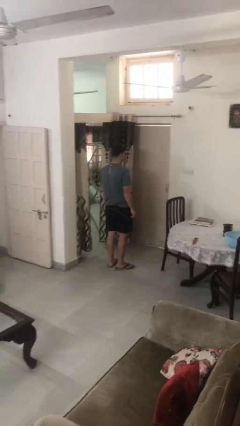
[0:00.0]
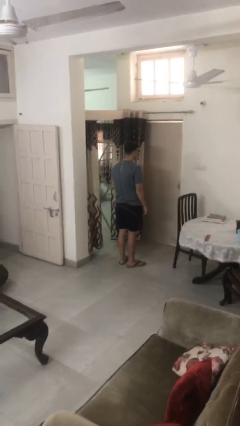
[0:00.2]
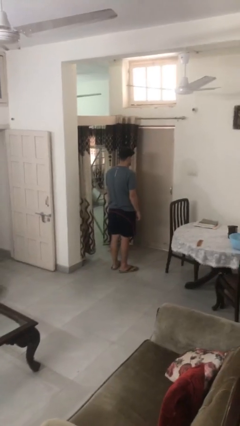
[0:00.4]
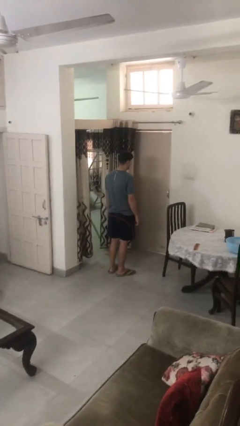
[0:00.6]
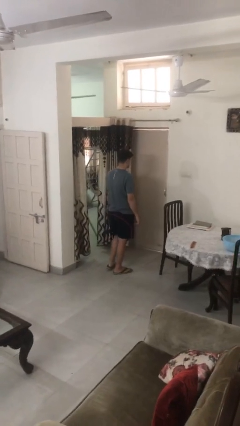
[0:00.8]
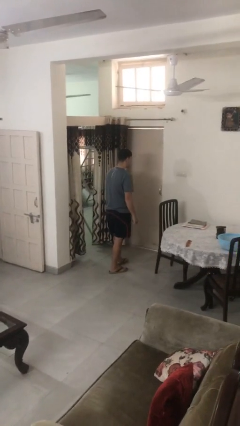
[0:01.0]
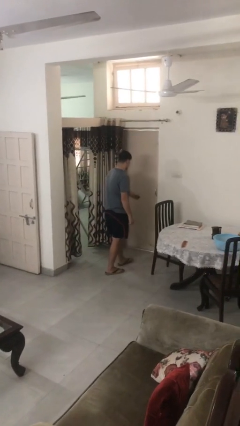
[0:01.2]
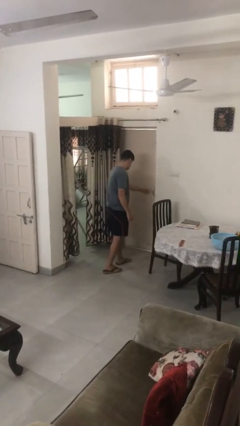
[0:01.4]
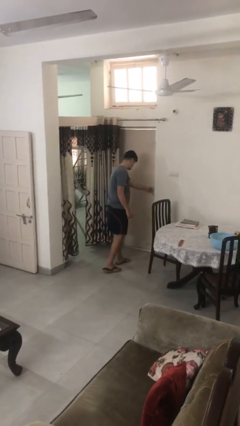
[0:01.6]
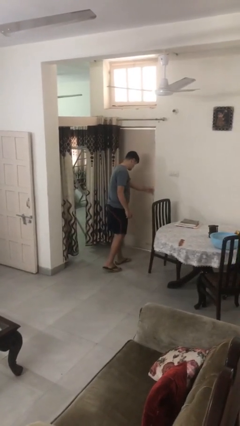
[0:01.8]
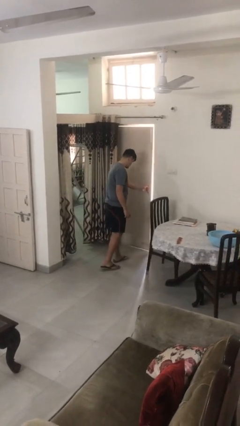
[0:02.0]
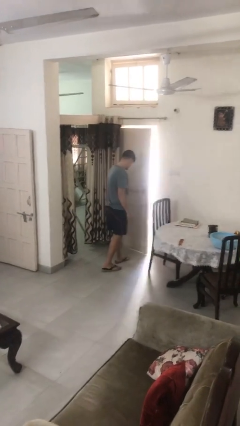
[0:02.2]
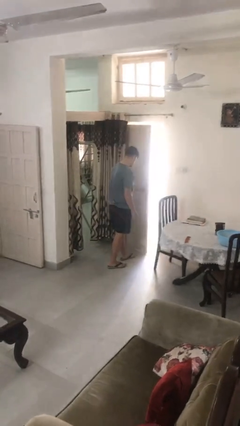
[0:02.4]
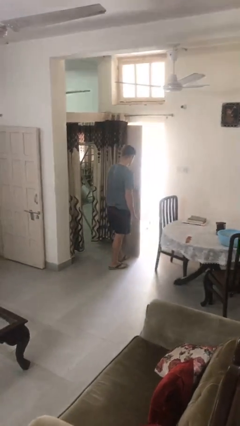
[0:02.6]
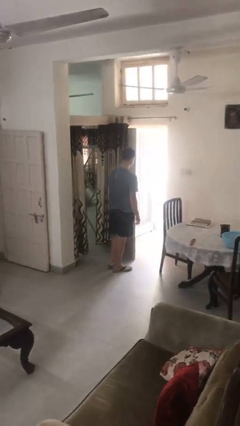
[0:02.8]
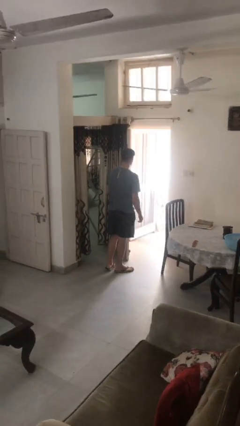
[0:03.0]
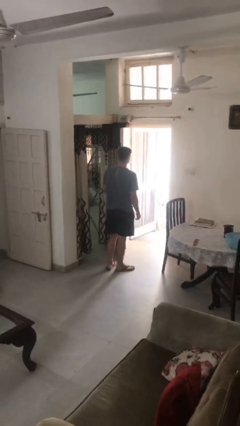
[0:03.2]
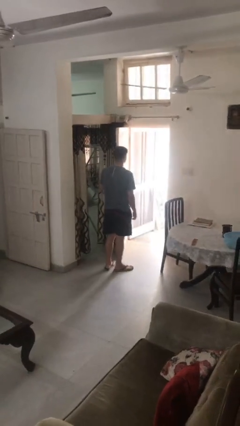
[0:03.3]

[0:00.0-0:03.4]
person opens facility door

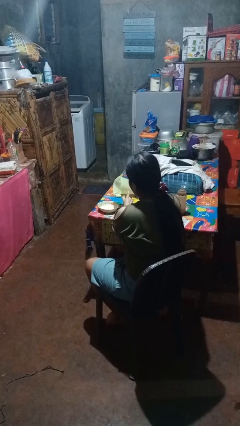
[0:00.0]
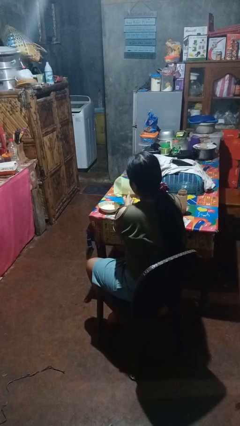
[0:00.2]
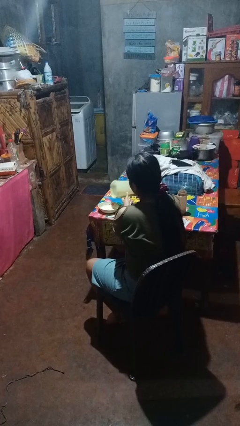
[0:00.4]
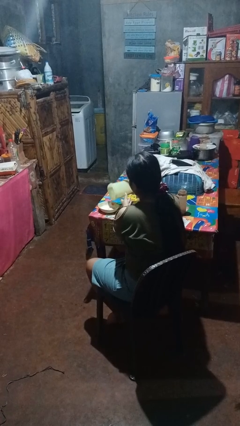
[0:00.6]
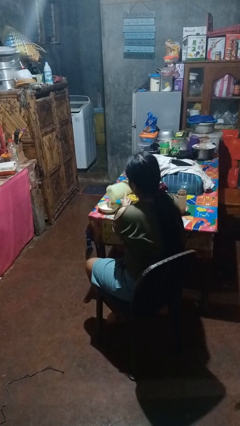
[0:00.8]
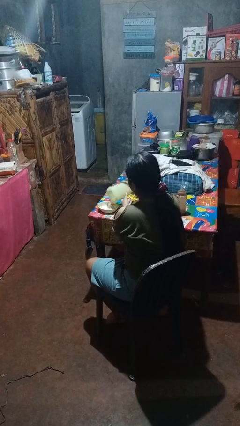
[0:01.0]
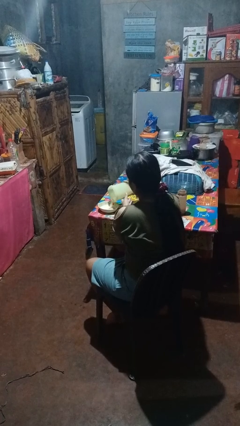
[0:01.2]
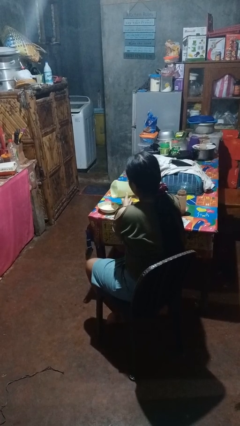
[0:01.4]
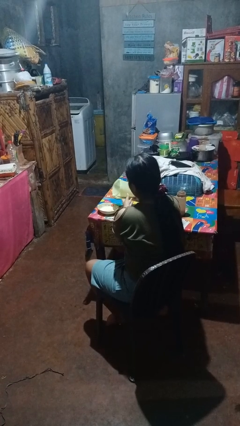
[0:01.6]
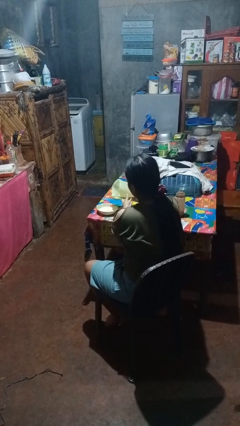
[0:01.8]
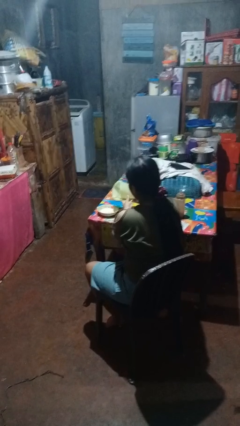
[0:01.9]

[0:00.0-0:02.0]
person pours into bowl

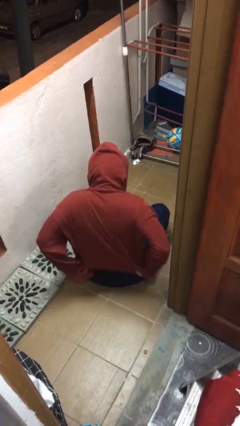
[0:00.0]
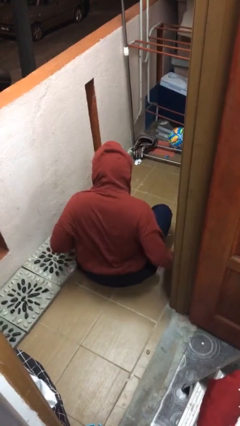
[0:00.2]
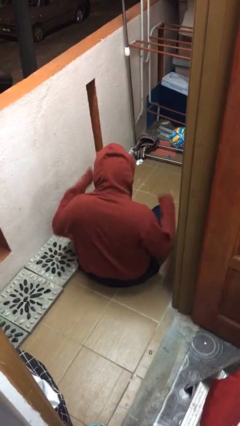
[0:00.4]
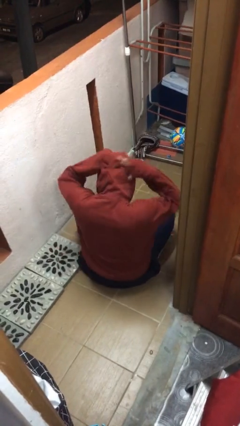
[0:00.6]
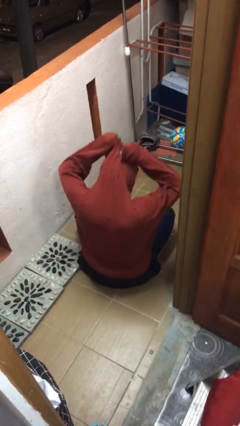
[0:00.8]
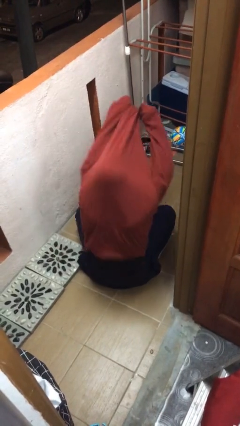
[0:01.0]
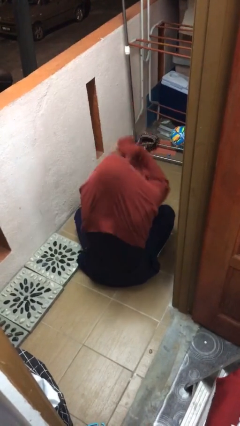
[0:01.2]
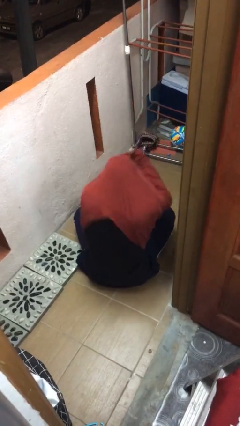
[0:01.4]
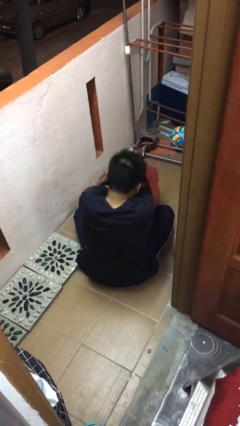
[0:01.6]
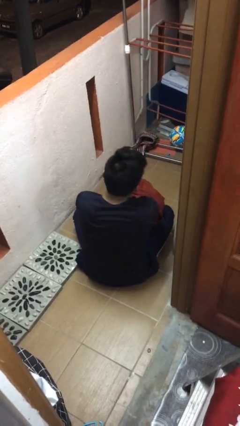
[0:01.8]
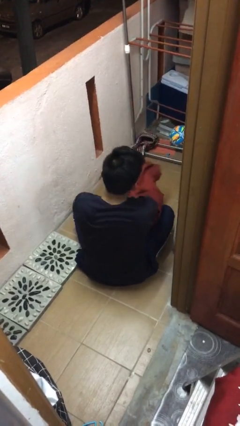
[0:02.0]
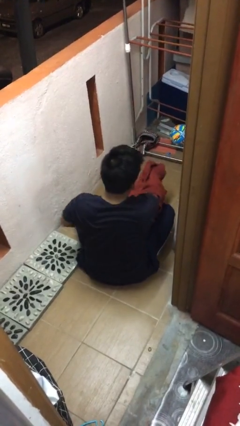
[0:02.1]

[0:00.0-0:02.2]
person takes off hoodie

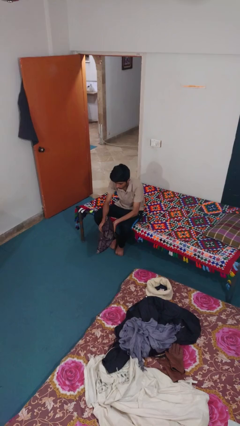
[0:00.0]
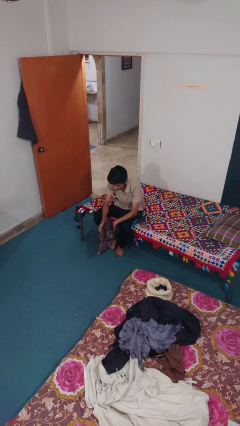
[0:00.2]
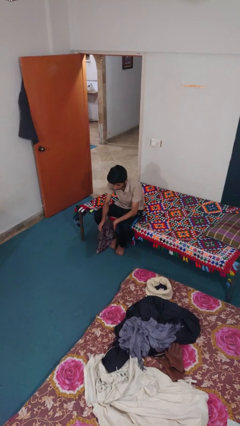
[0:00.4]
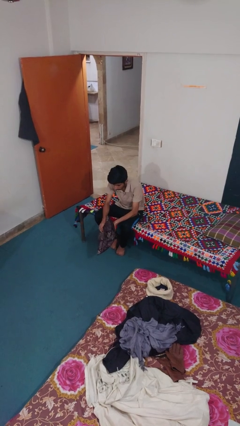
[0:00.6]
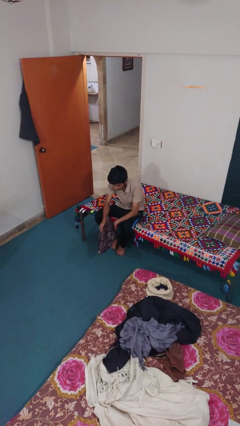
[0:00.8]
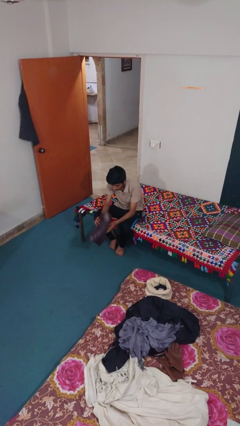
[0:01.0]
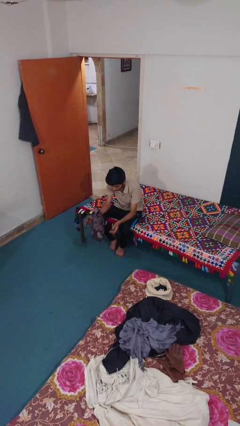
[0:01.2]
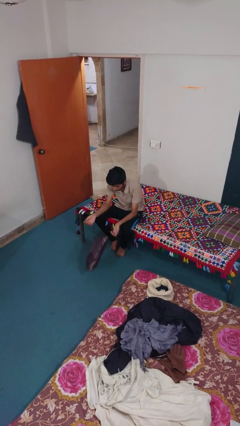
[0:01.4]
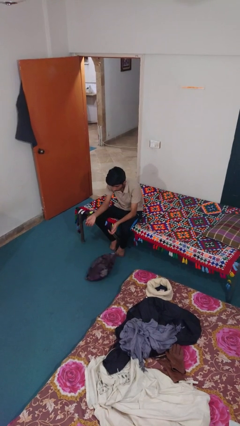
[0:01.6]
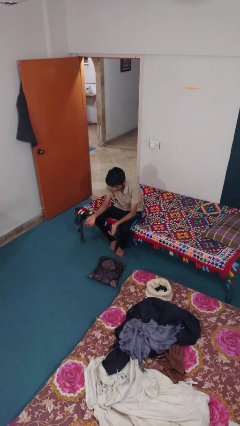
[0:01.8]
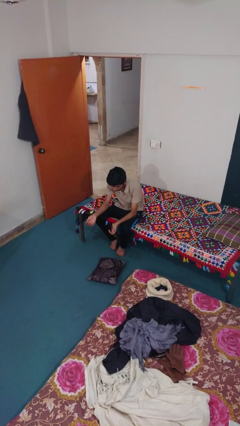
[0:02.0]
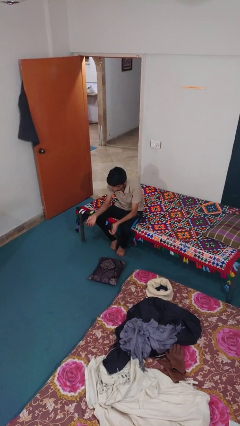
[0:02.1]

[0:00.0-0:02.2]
person drops object

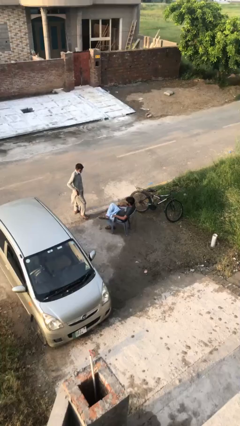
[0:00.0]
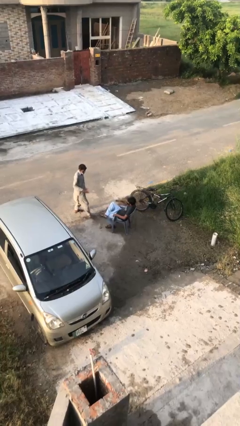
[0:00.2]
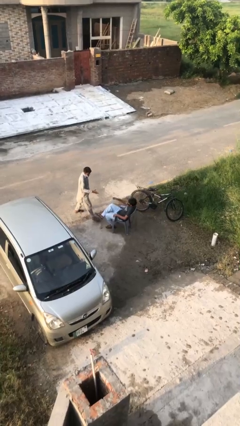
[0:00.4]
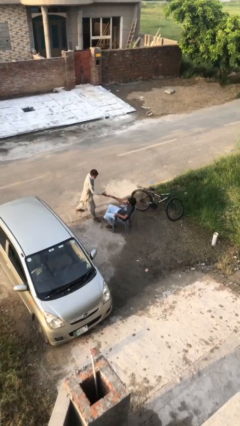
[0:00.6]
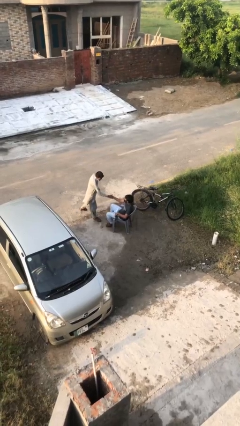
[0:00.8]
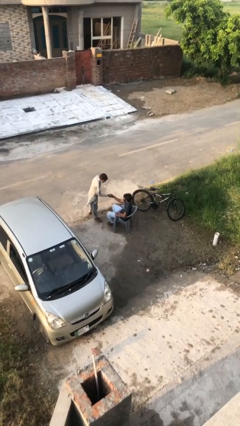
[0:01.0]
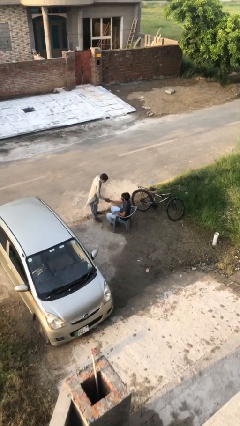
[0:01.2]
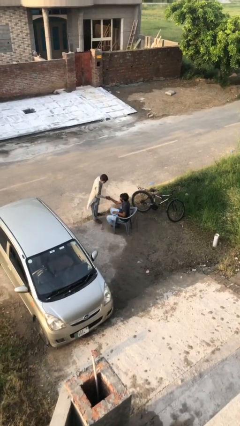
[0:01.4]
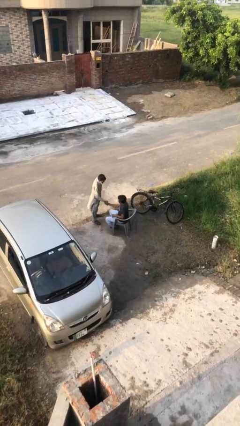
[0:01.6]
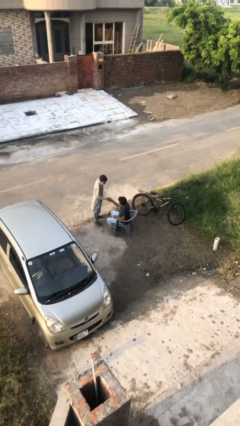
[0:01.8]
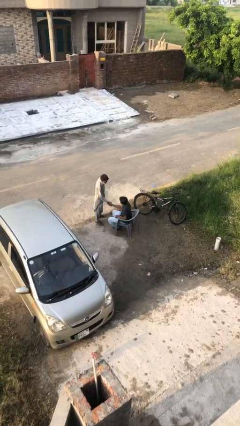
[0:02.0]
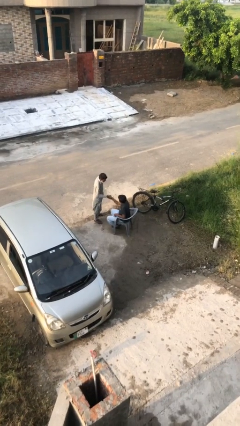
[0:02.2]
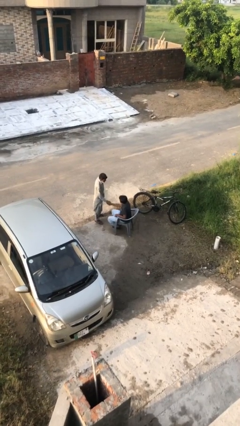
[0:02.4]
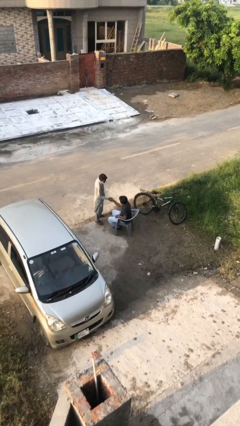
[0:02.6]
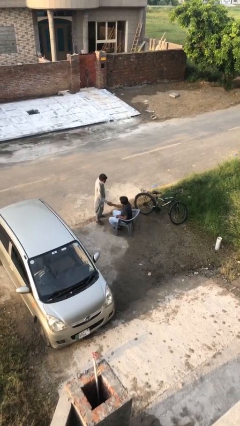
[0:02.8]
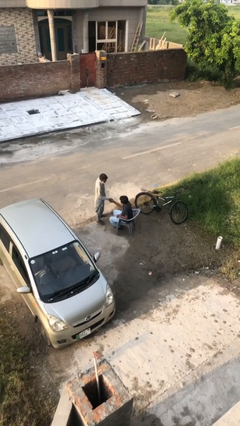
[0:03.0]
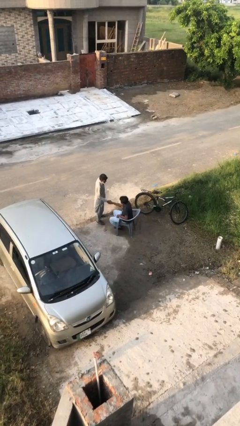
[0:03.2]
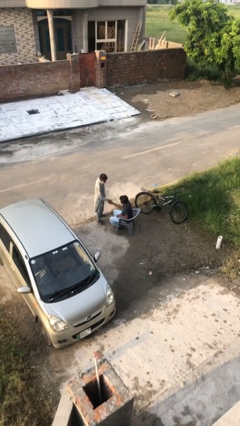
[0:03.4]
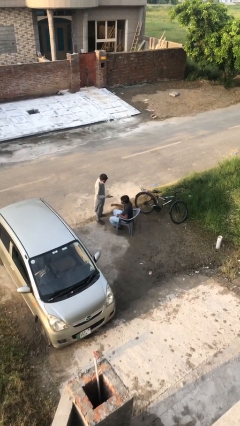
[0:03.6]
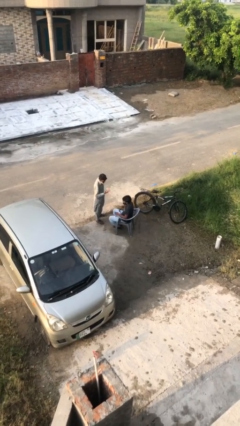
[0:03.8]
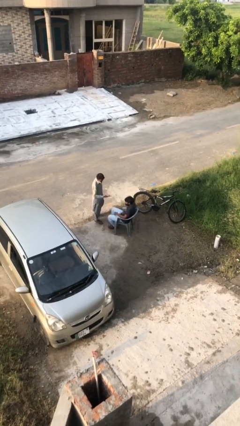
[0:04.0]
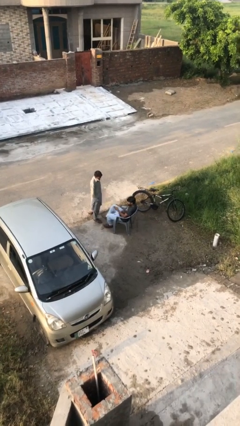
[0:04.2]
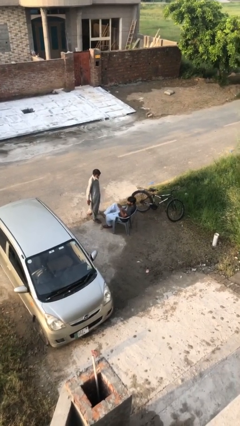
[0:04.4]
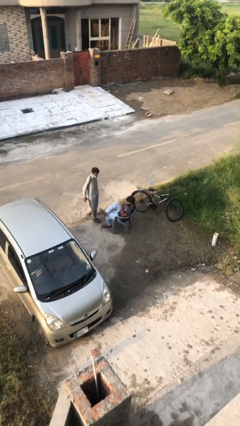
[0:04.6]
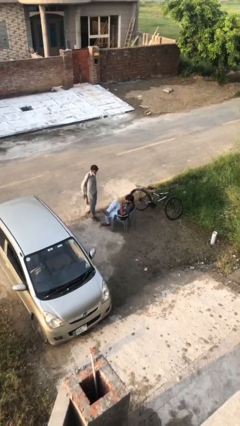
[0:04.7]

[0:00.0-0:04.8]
person shakes hand

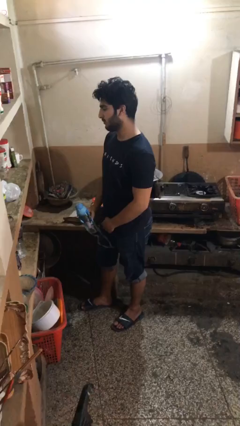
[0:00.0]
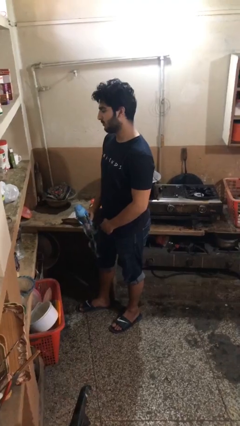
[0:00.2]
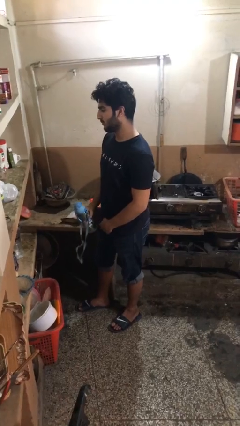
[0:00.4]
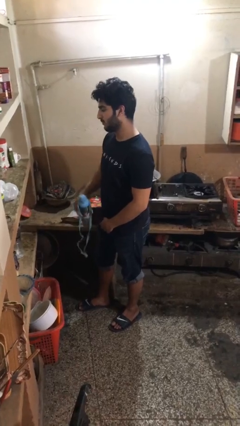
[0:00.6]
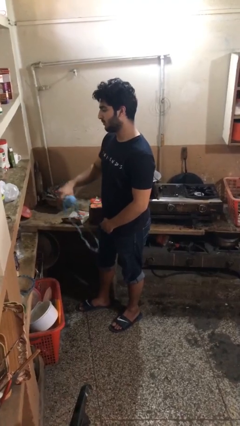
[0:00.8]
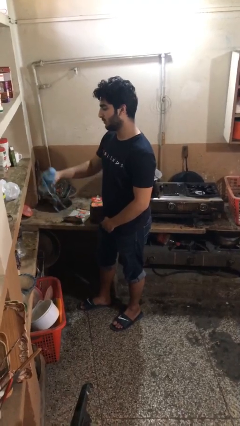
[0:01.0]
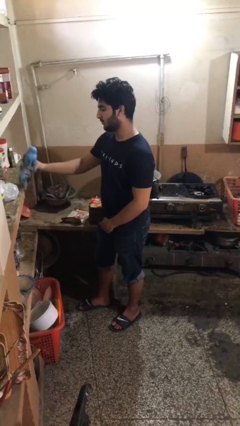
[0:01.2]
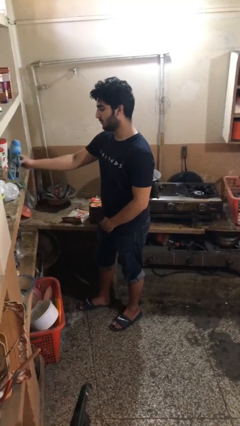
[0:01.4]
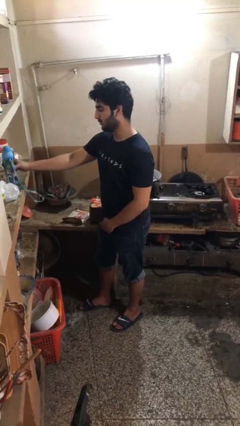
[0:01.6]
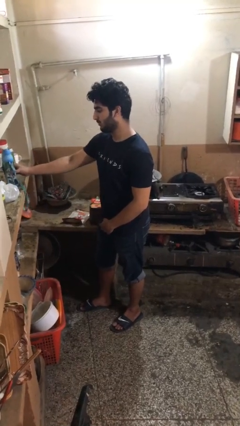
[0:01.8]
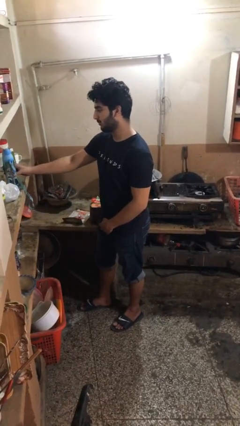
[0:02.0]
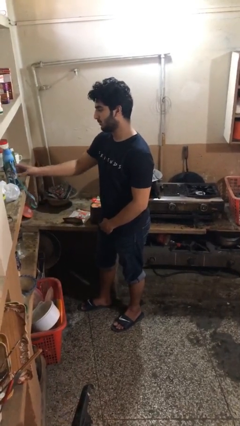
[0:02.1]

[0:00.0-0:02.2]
person puts down object on countertop

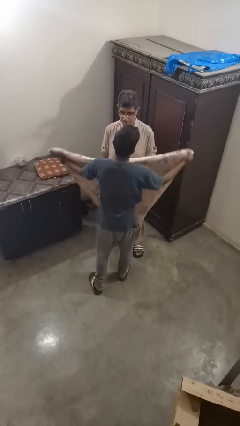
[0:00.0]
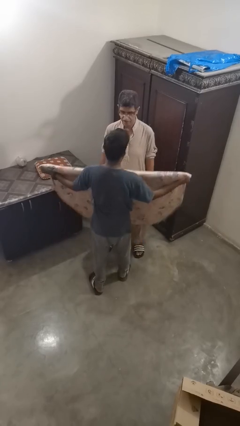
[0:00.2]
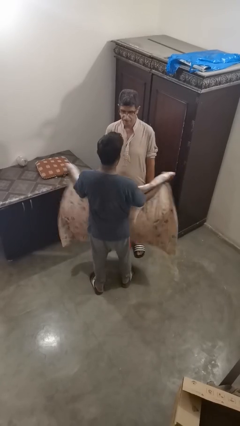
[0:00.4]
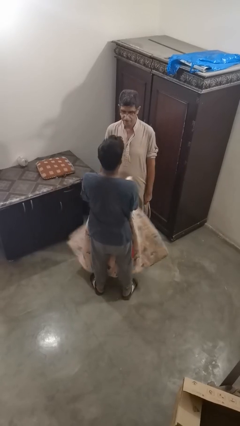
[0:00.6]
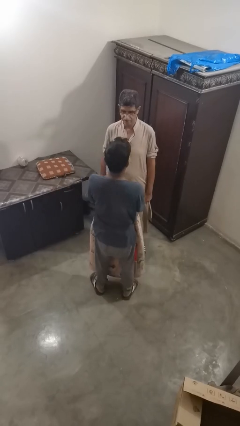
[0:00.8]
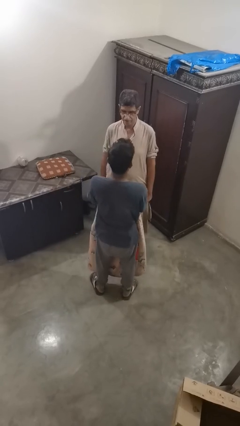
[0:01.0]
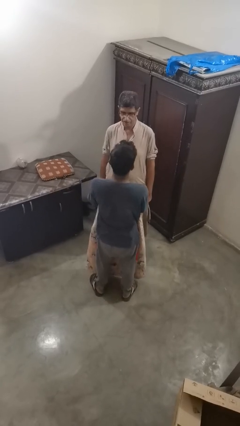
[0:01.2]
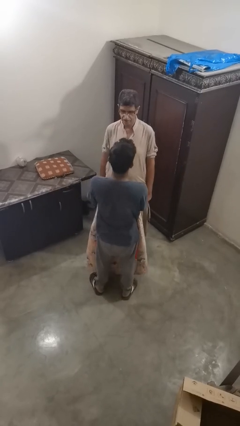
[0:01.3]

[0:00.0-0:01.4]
person uncovers friend with blanket
